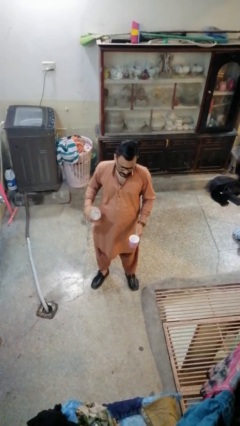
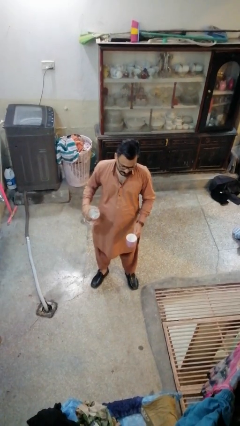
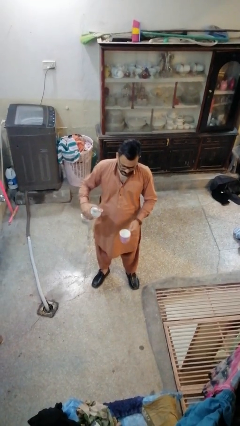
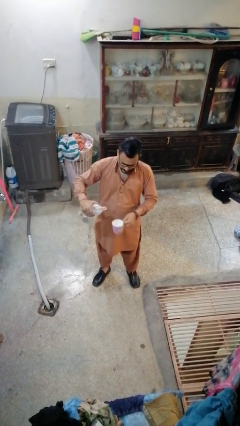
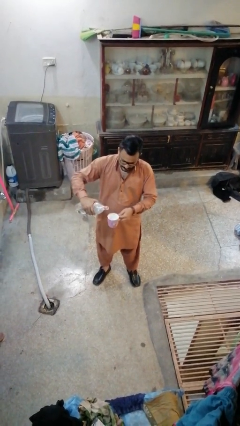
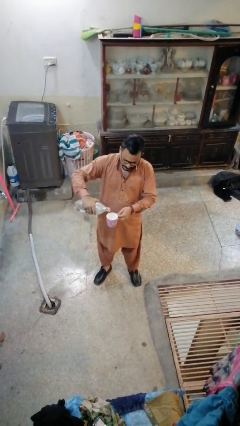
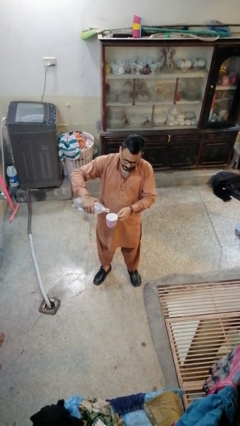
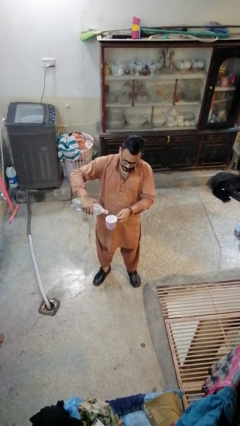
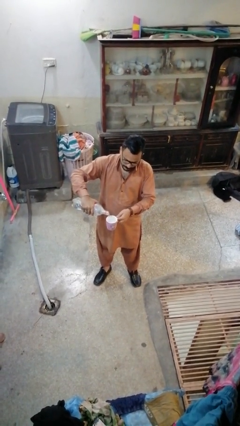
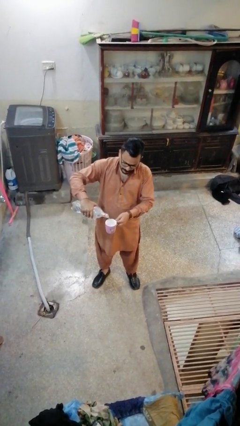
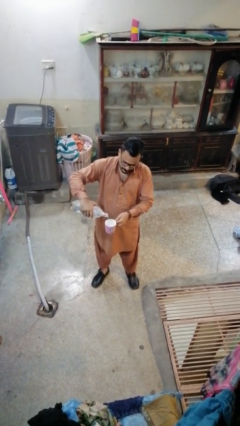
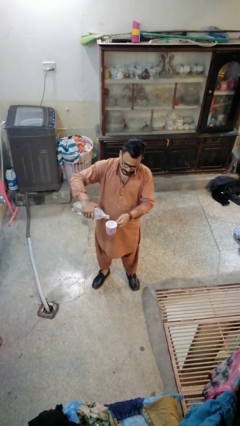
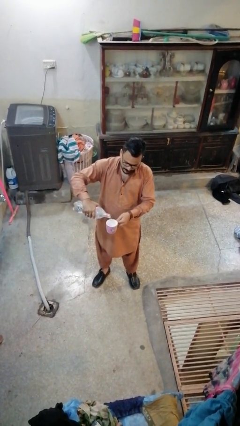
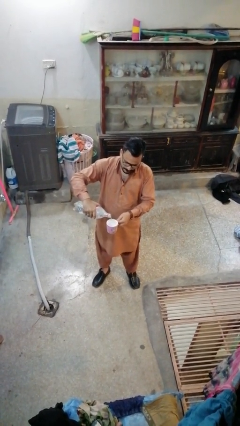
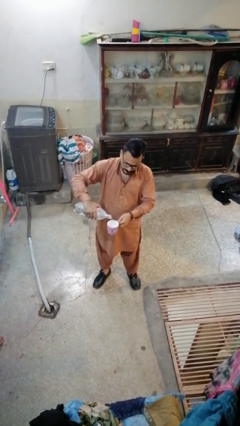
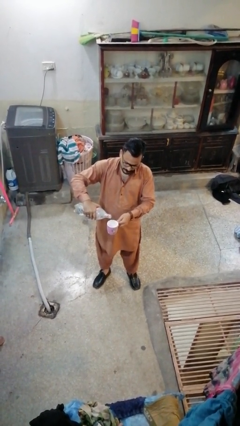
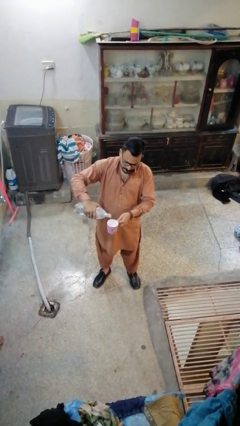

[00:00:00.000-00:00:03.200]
person pours liquid into cup

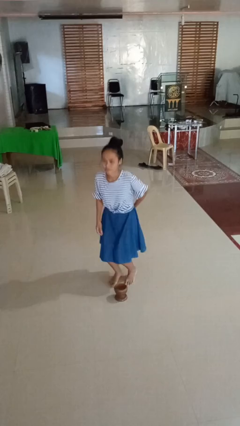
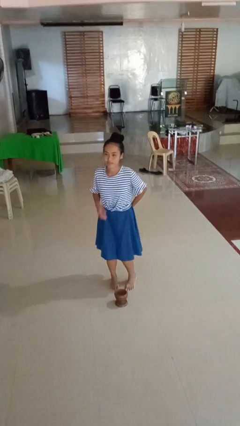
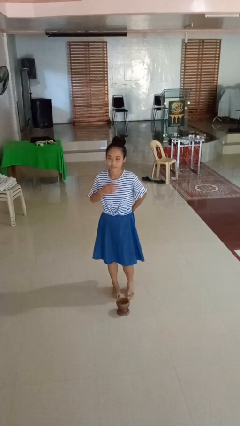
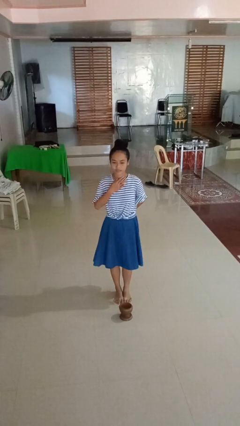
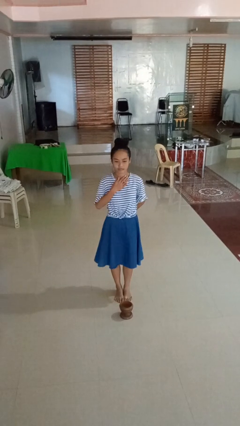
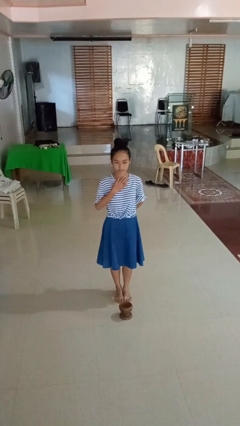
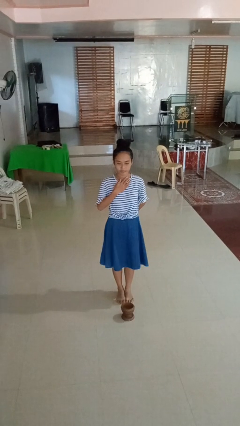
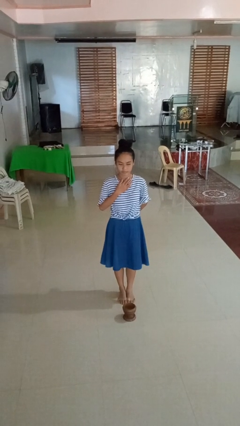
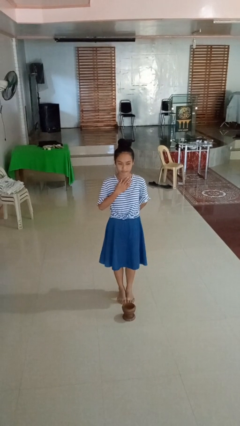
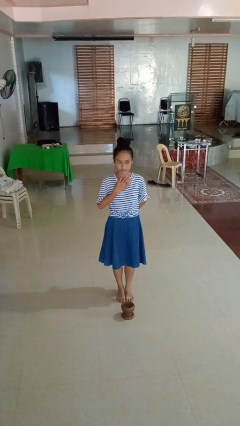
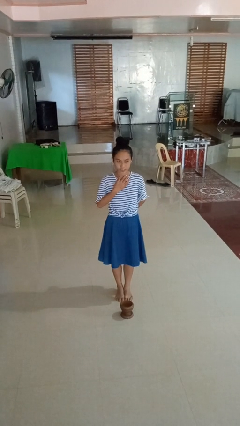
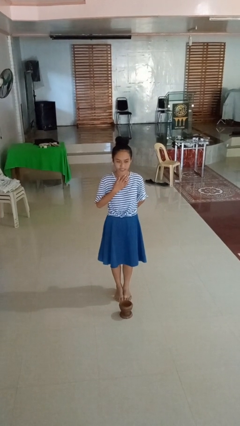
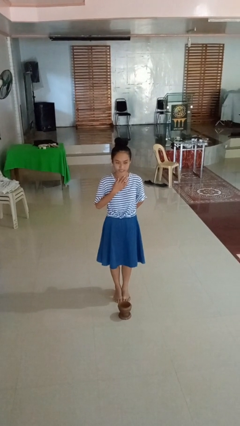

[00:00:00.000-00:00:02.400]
person stands up from floor

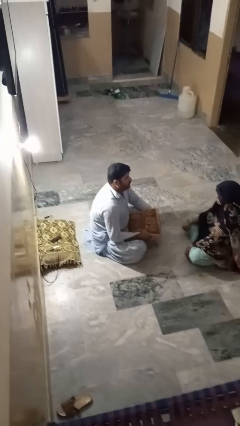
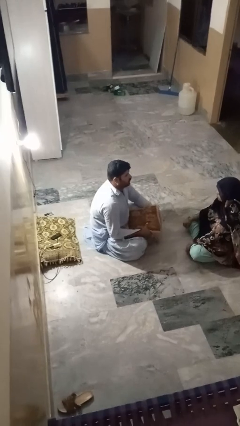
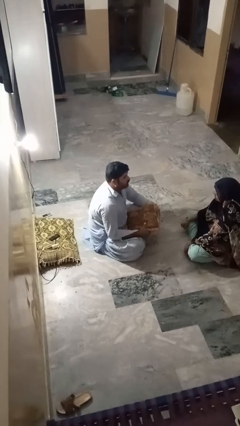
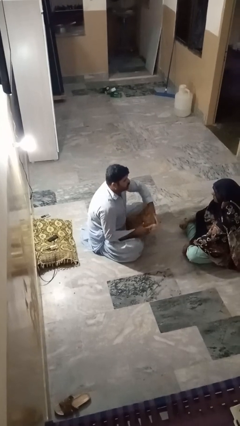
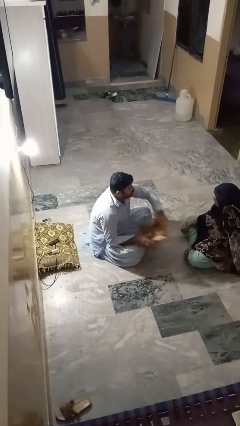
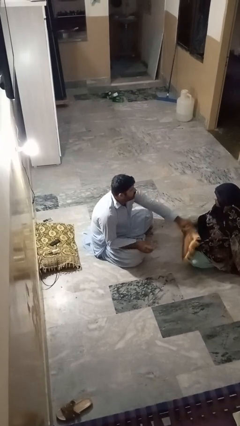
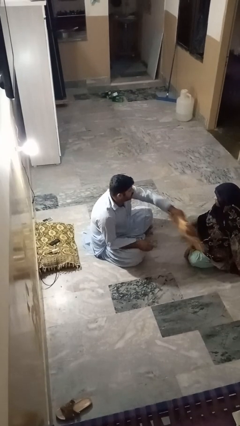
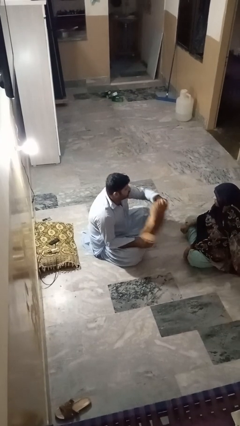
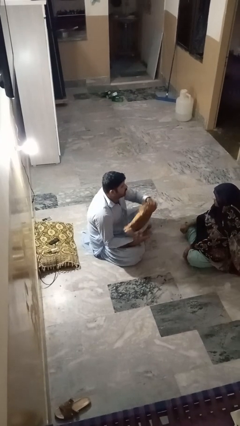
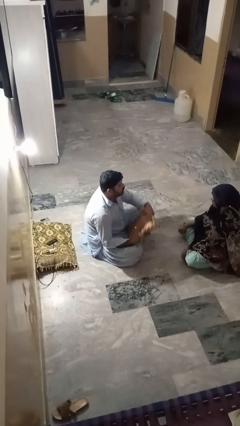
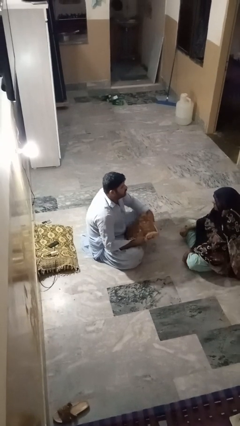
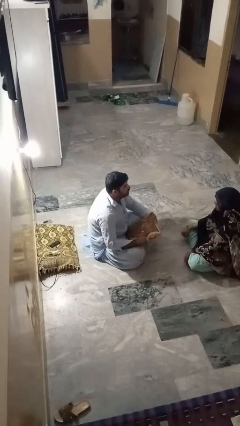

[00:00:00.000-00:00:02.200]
person hits person with pillow

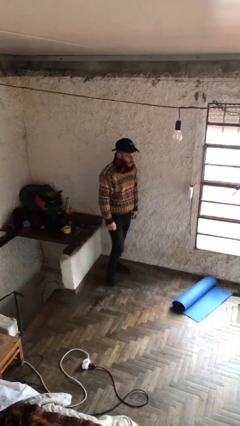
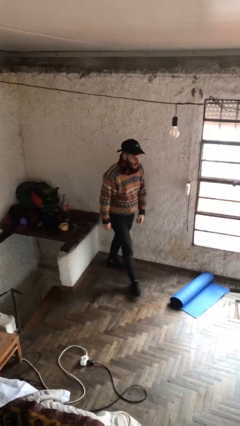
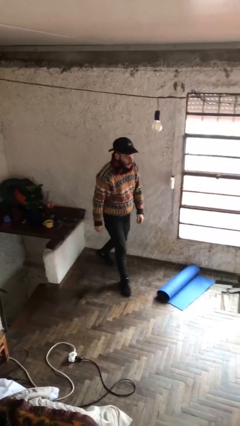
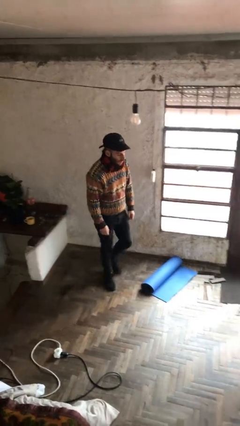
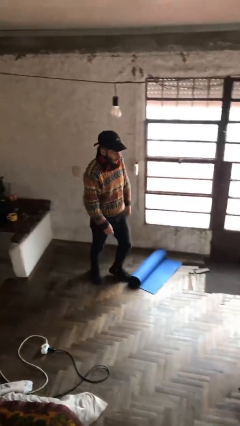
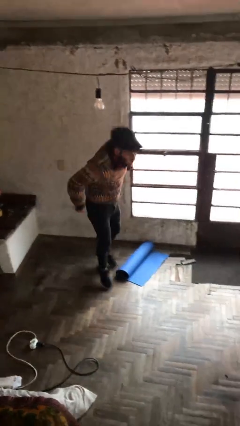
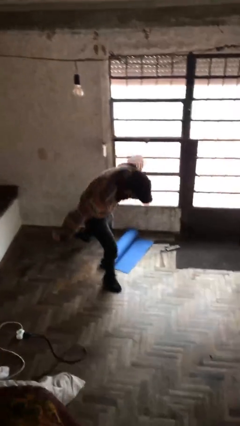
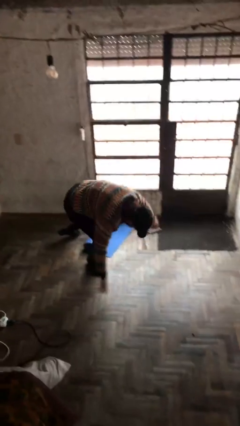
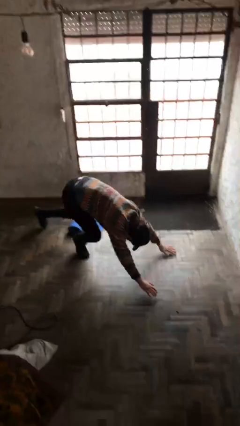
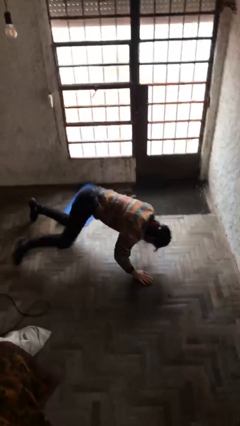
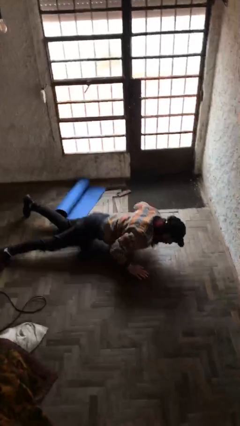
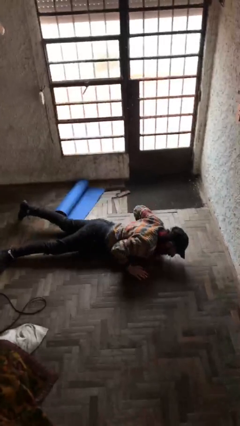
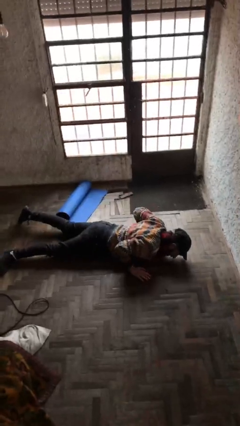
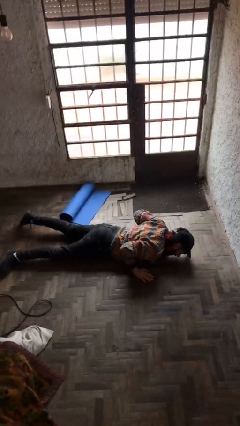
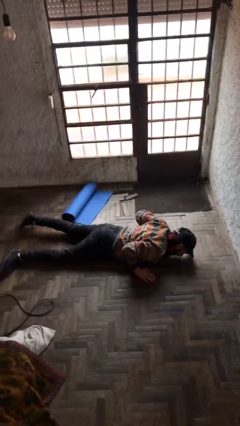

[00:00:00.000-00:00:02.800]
person trips on object on floor

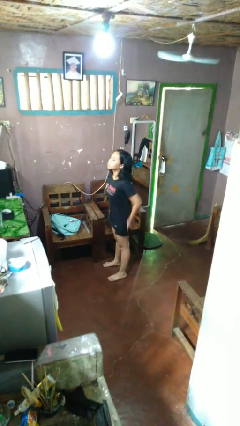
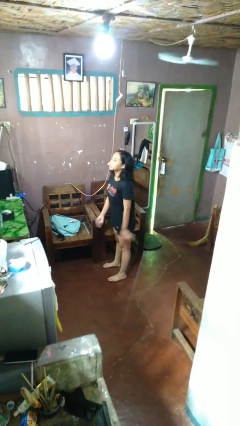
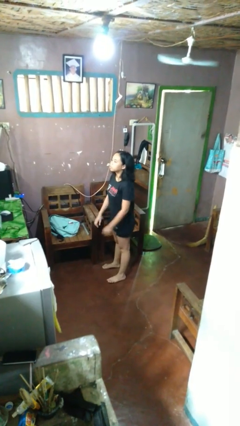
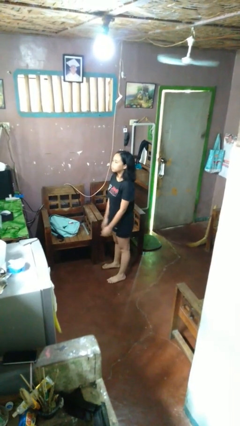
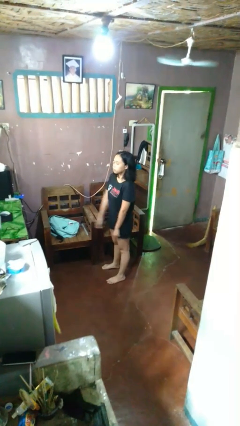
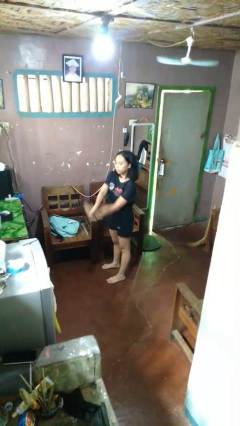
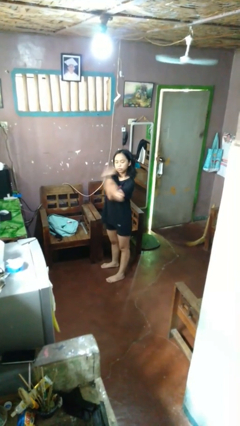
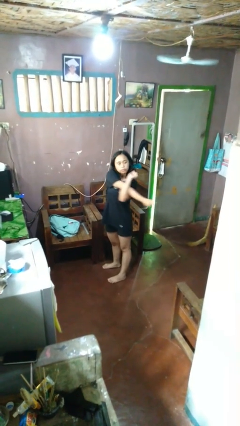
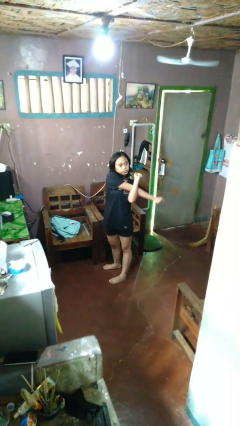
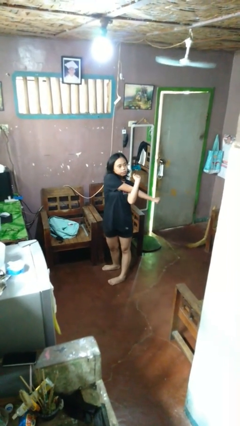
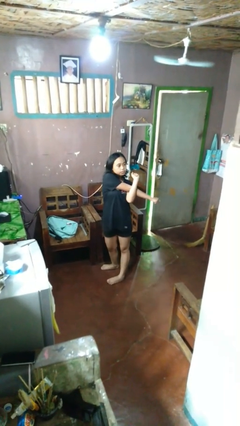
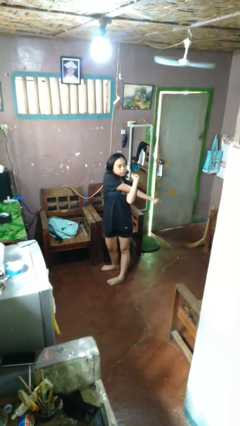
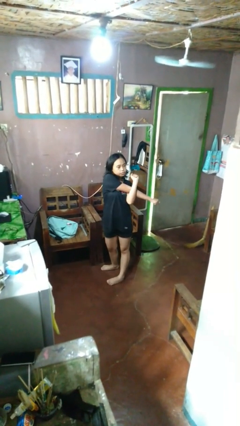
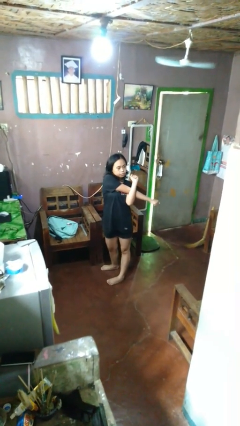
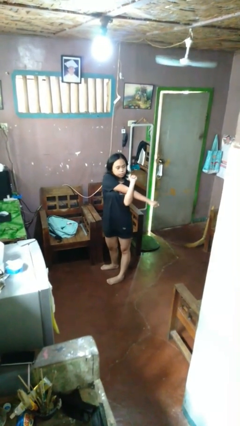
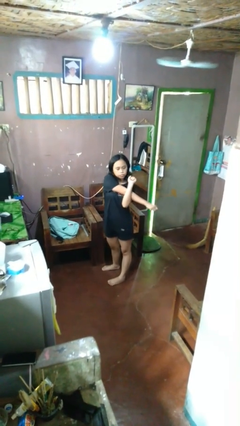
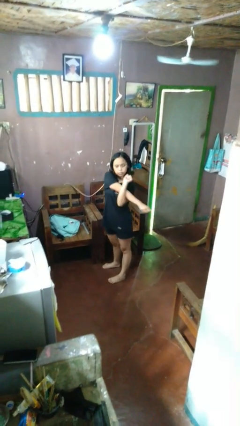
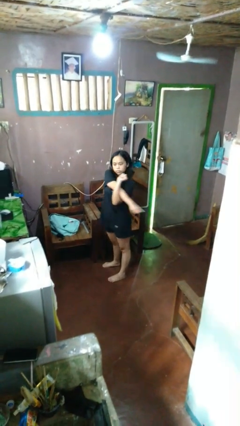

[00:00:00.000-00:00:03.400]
person stretches arms to side

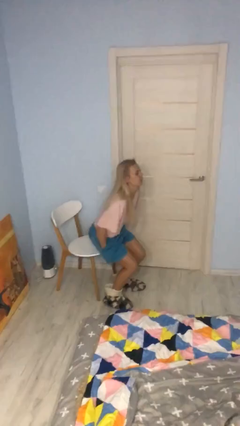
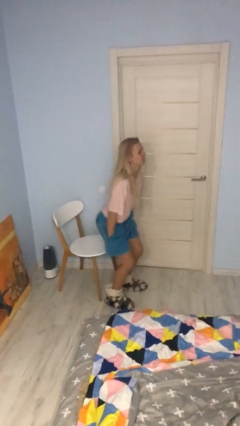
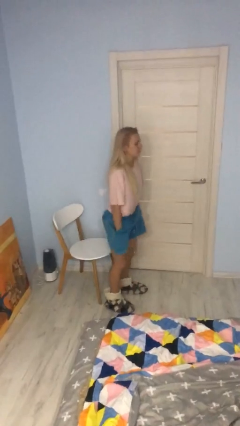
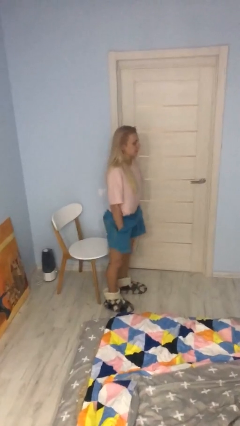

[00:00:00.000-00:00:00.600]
person stands up

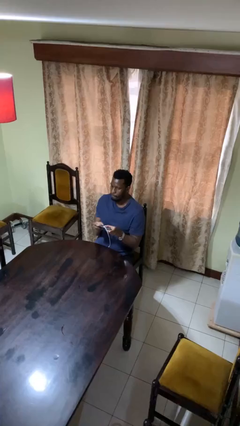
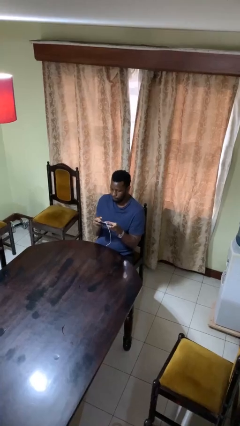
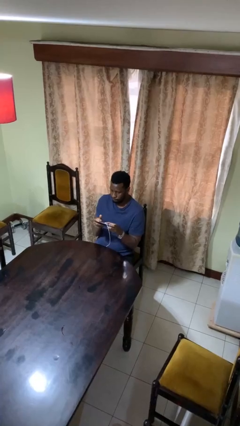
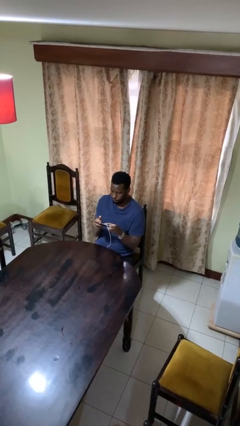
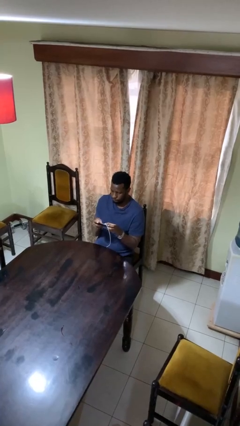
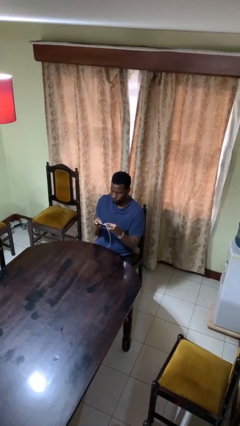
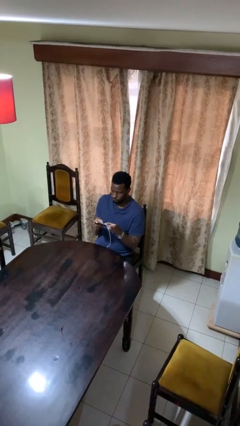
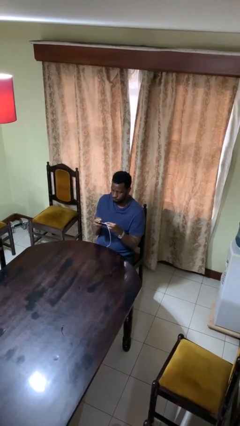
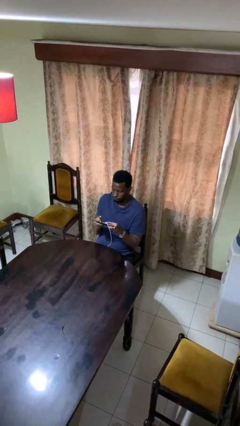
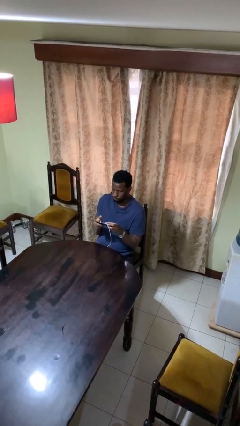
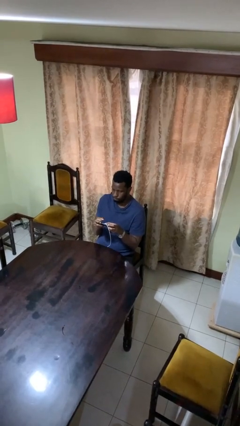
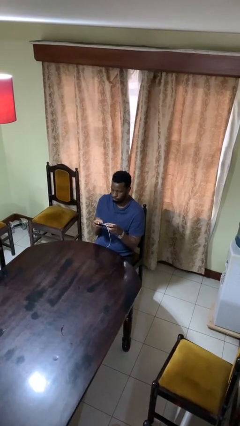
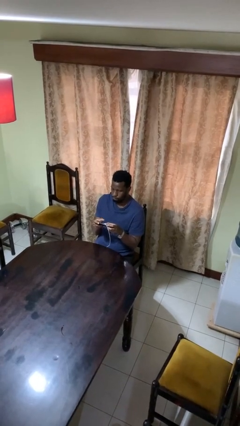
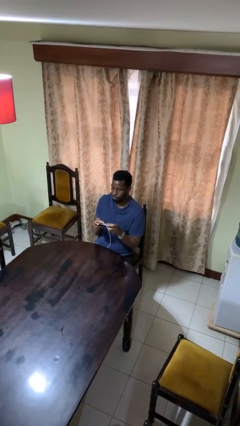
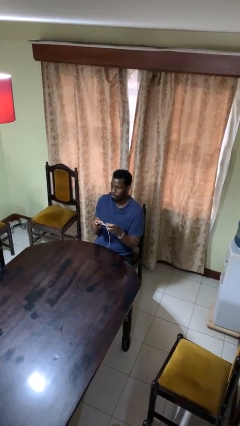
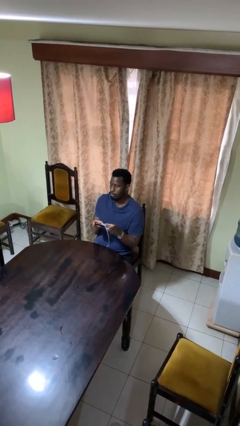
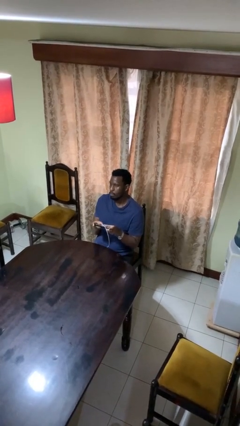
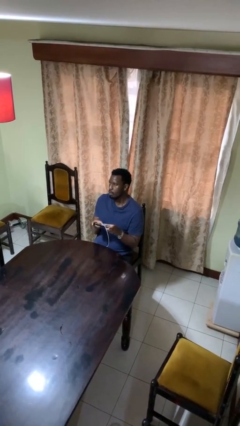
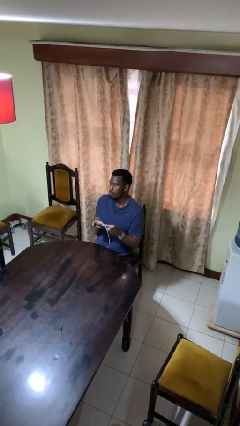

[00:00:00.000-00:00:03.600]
person interacts with handheld game
